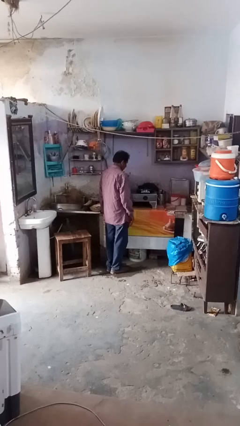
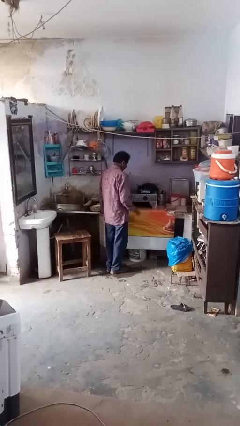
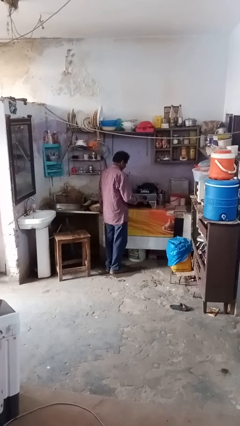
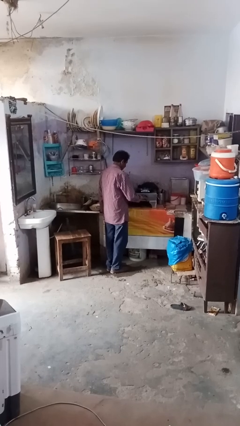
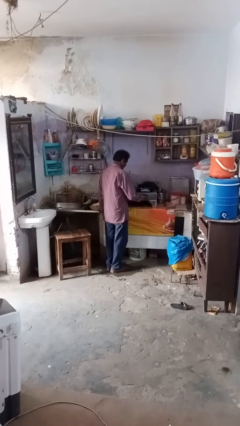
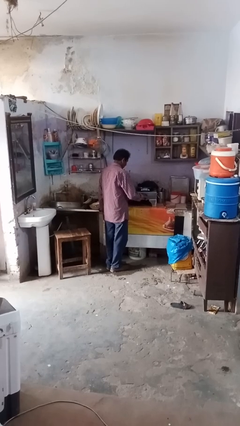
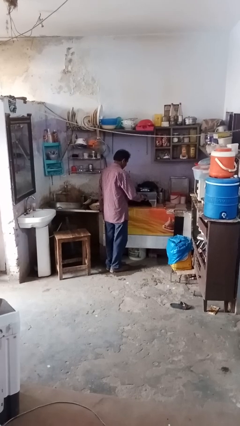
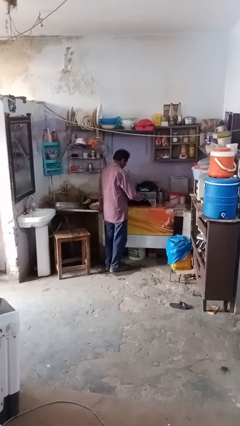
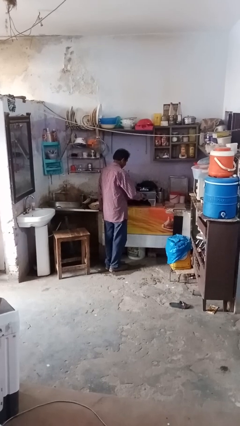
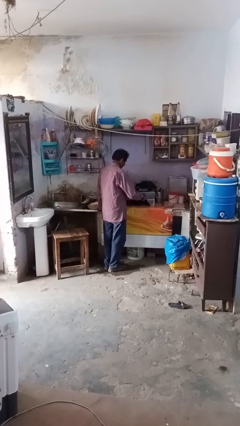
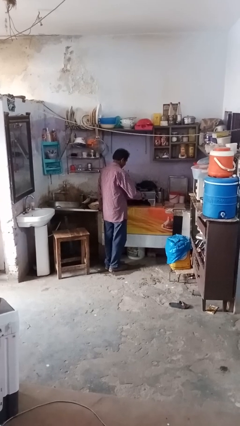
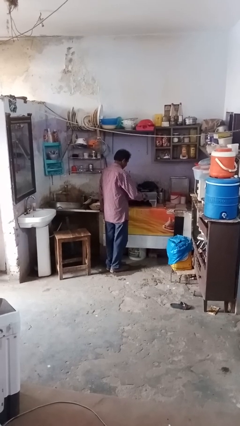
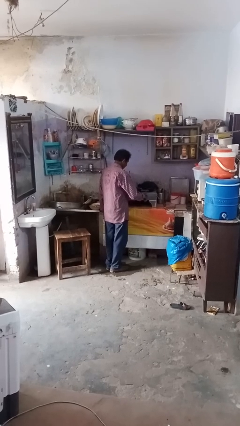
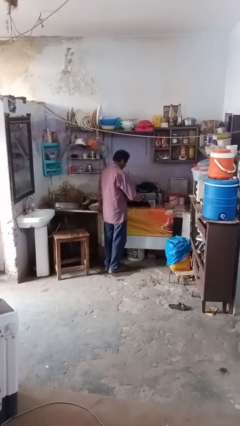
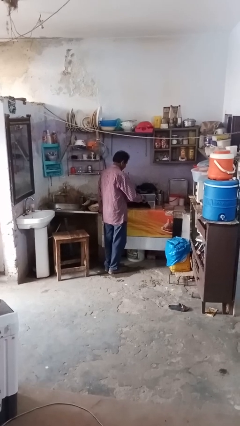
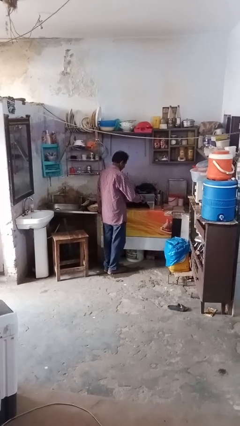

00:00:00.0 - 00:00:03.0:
person turns off stovetop

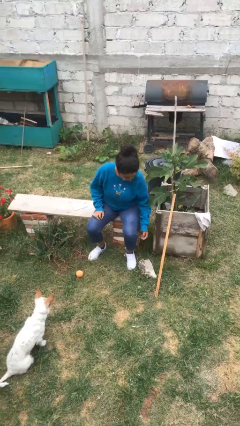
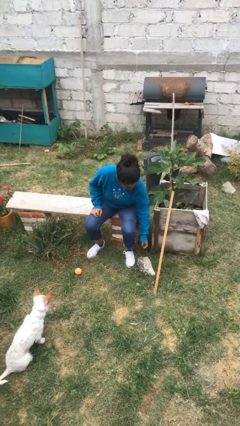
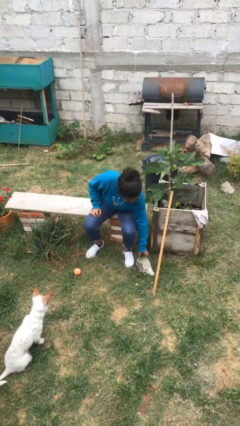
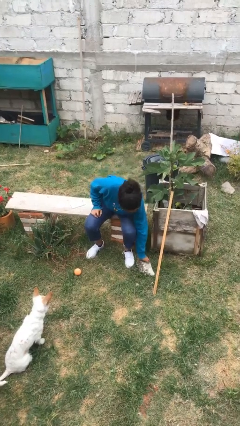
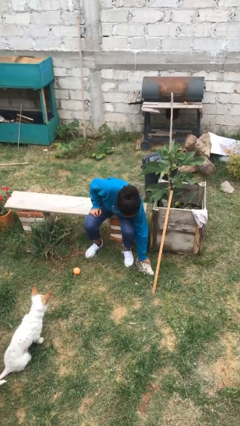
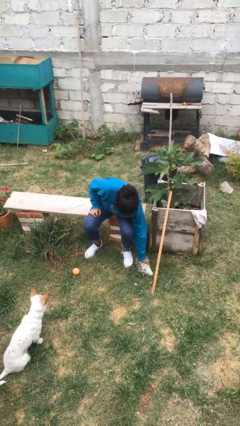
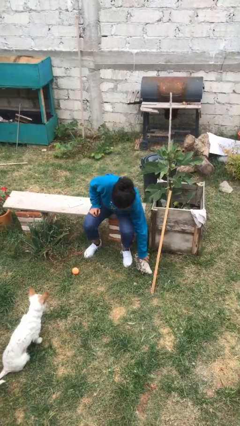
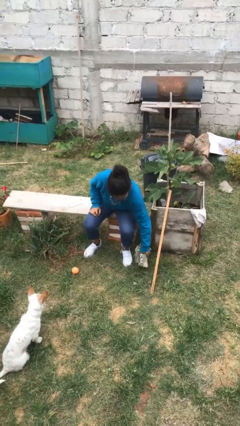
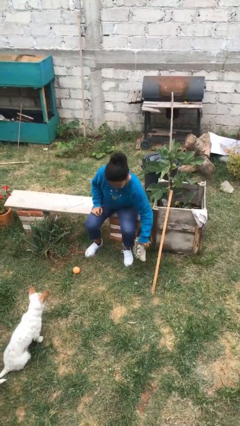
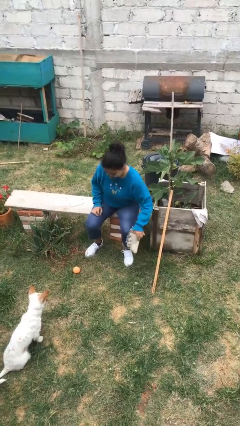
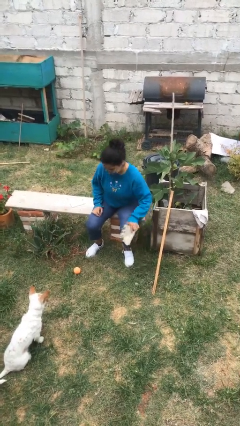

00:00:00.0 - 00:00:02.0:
person picks up object from floor

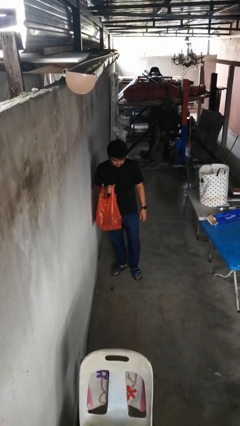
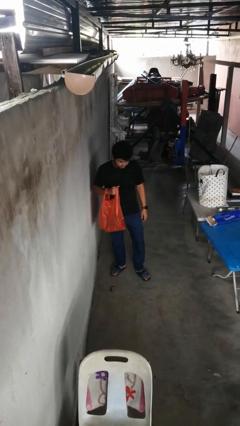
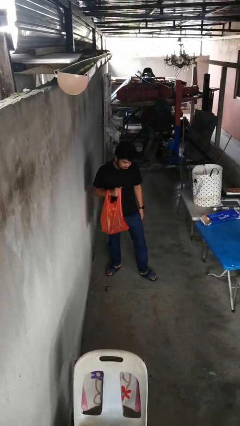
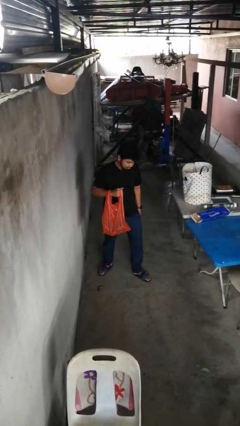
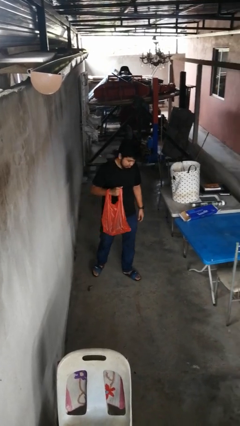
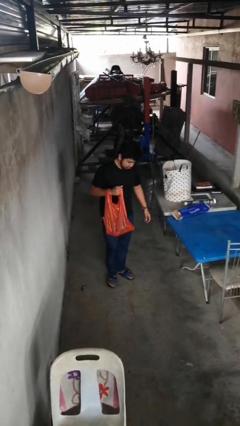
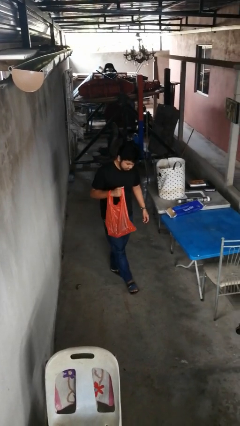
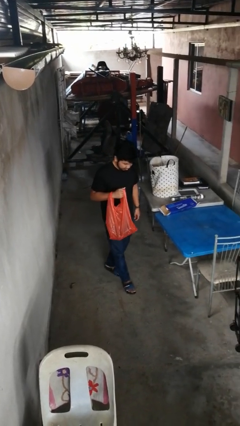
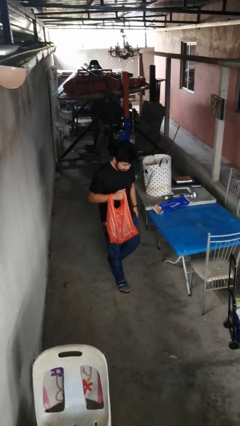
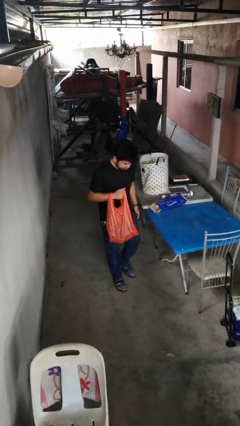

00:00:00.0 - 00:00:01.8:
person carries groceries

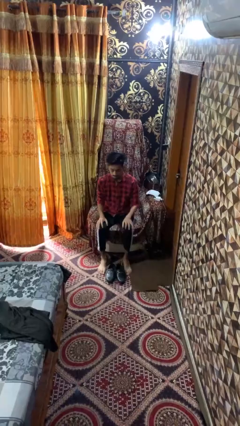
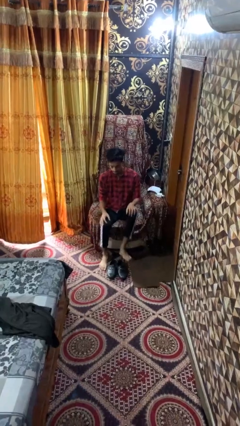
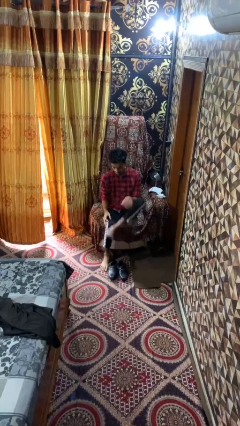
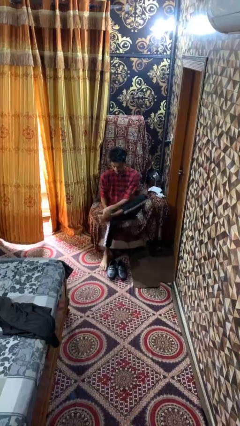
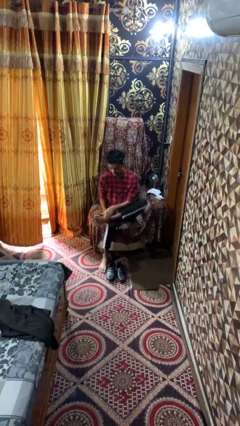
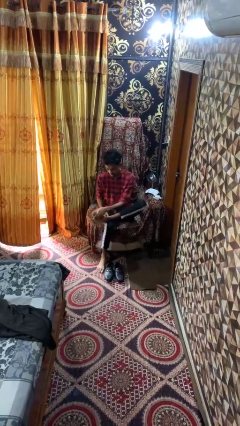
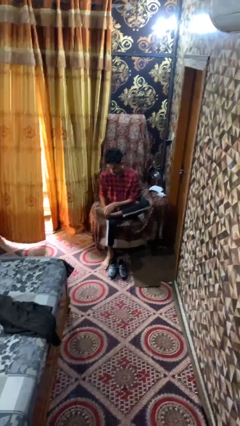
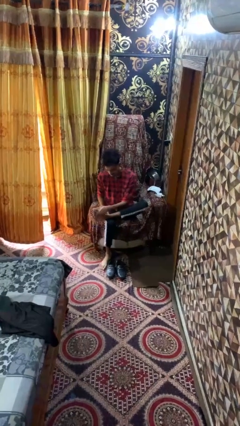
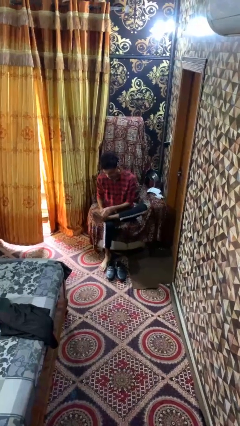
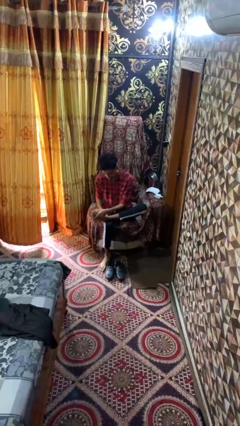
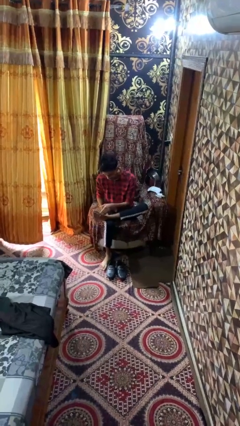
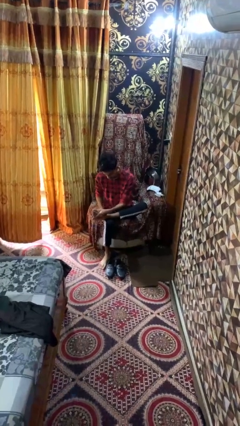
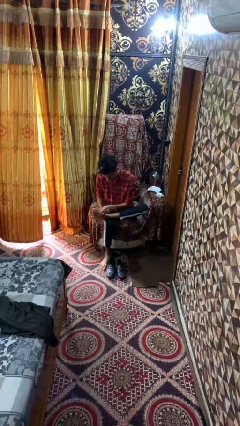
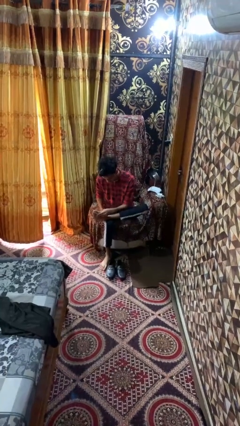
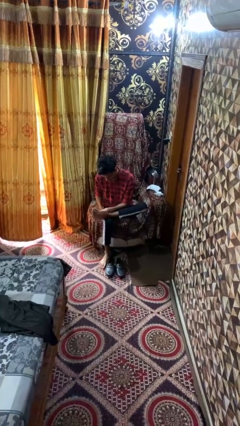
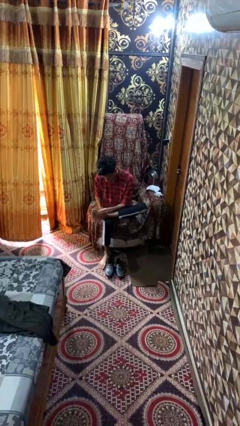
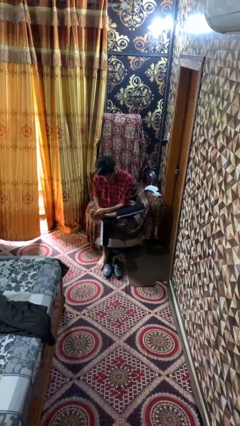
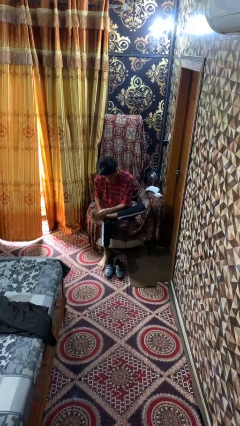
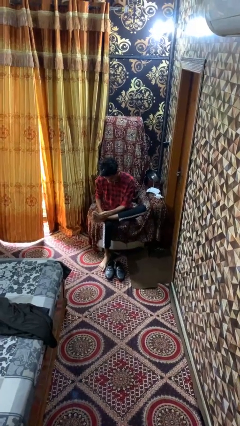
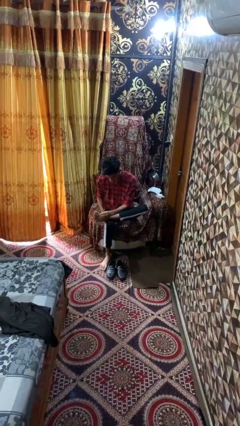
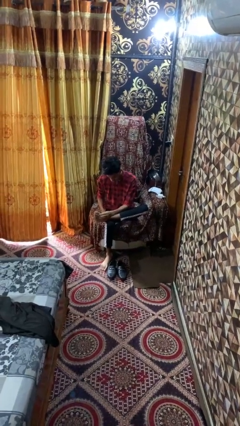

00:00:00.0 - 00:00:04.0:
person rubs foot

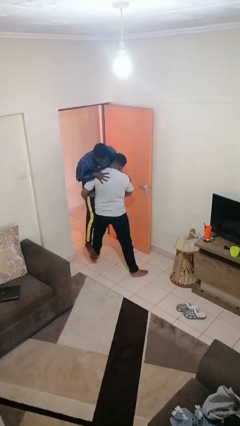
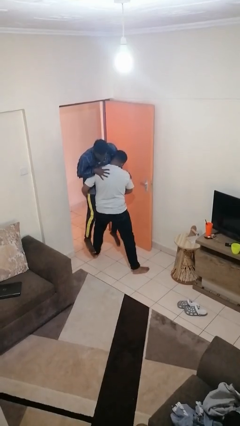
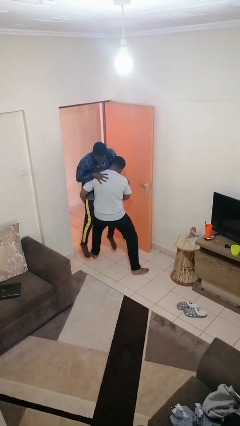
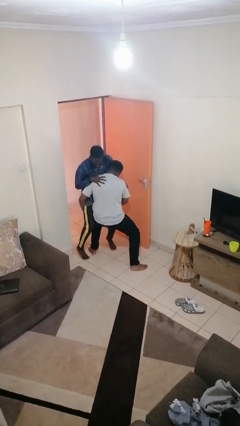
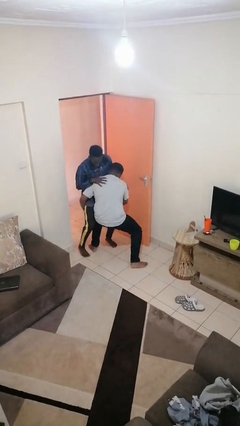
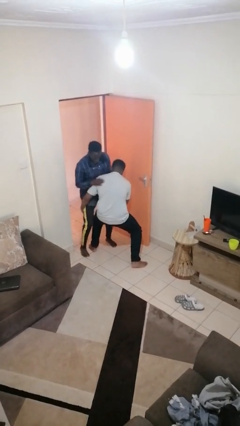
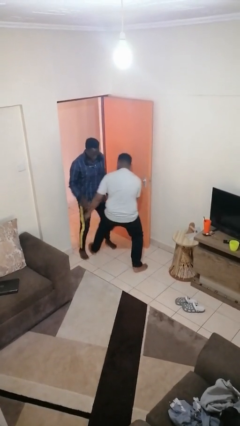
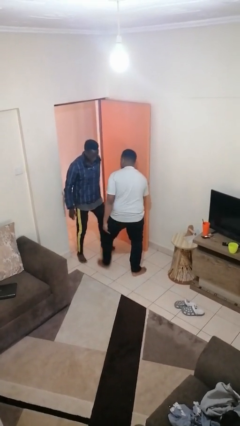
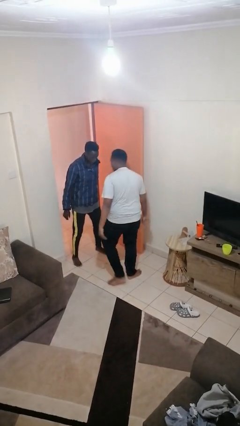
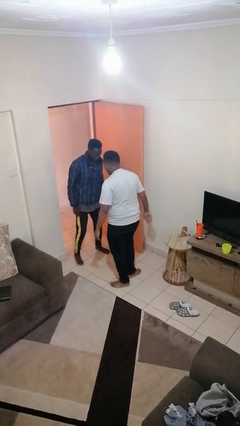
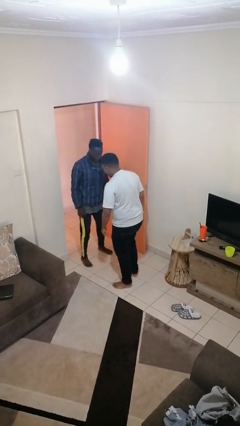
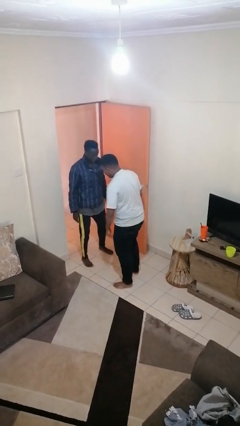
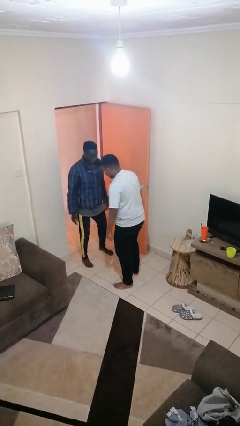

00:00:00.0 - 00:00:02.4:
person puts down person

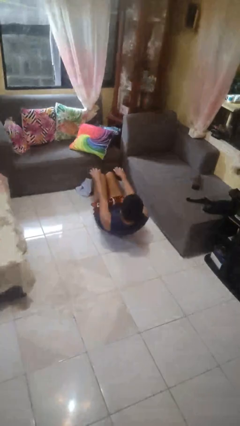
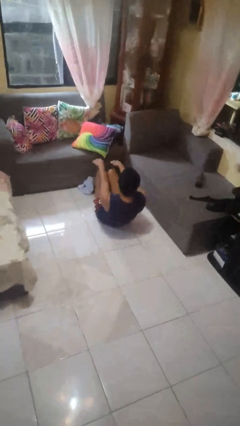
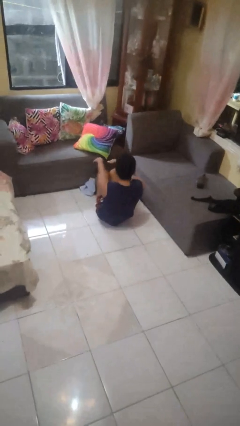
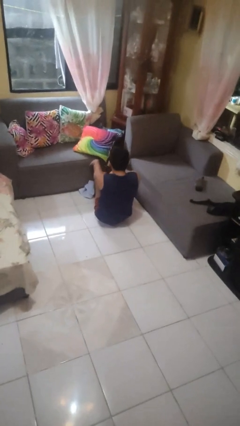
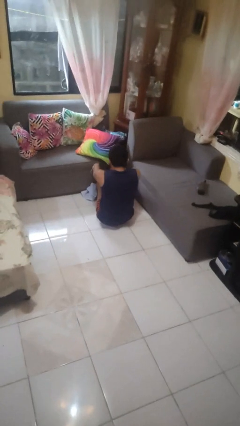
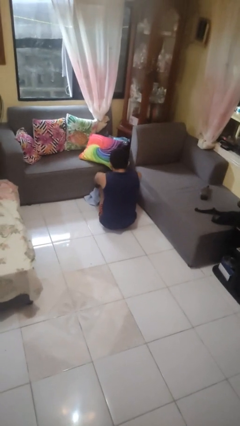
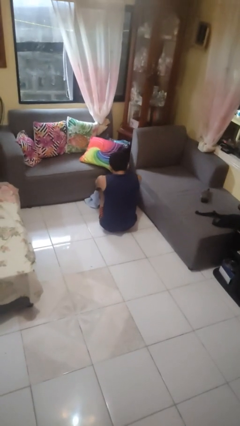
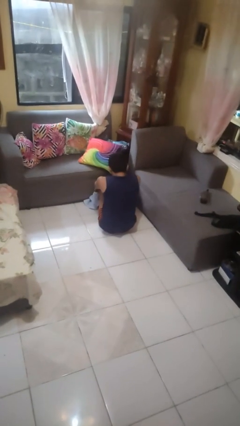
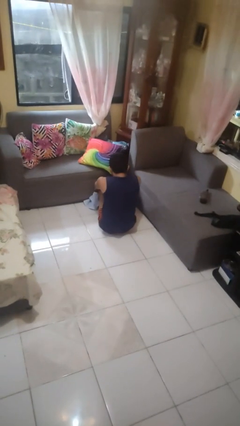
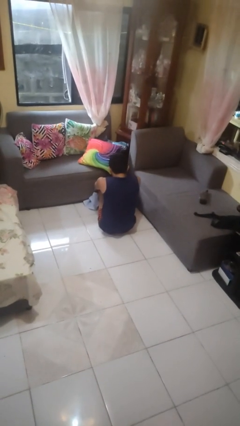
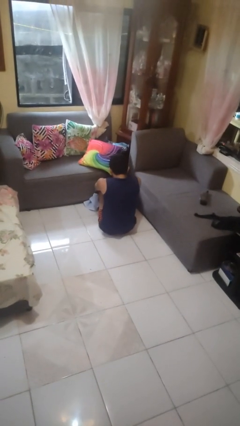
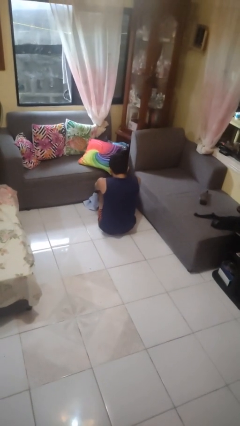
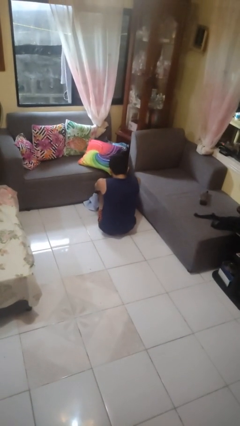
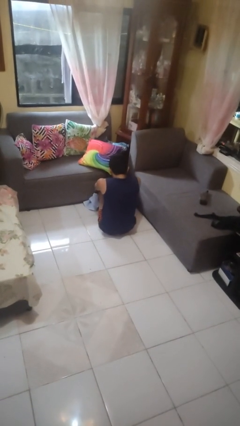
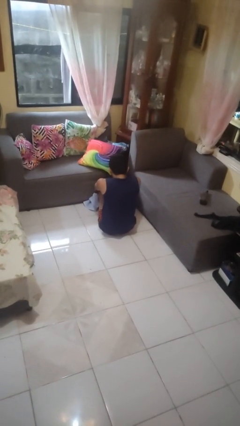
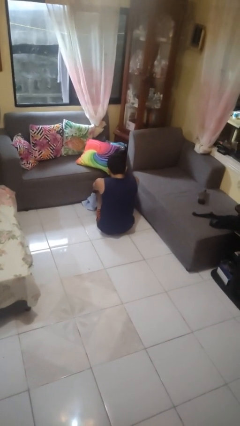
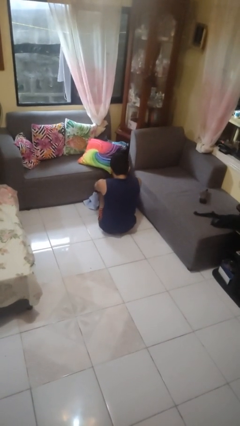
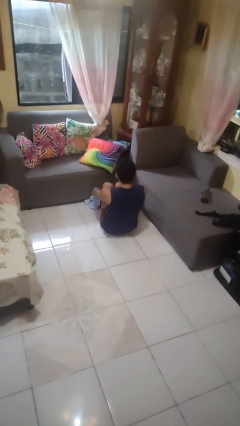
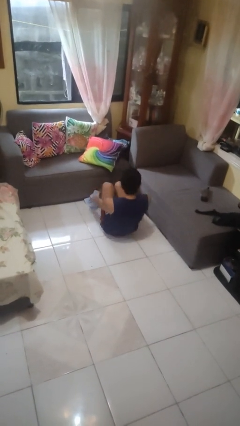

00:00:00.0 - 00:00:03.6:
person exercises with situp

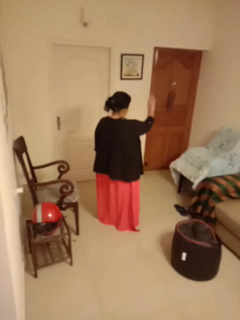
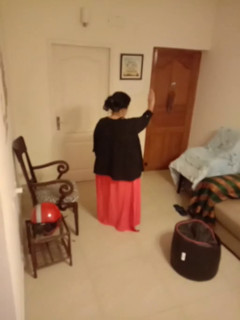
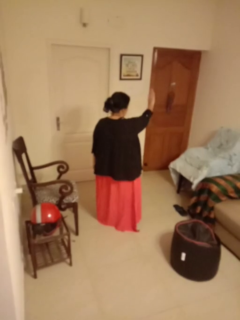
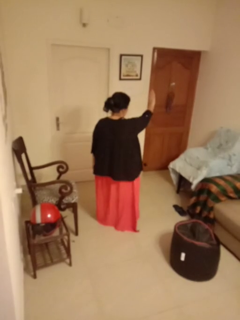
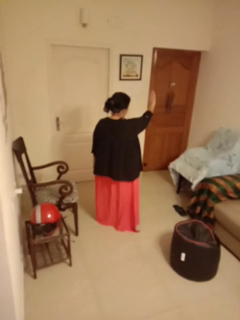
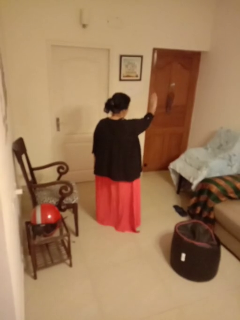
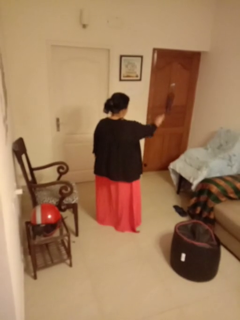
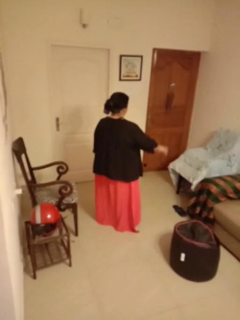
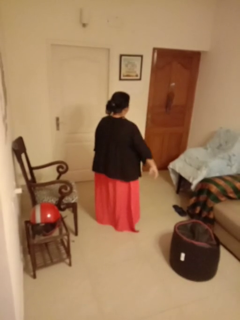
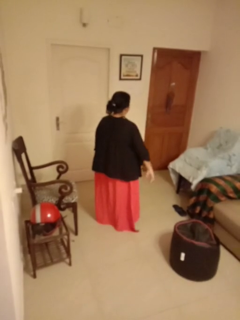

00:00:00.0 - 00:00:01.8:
person gestures stop
